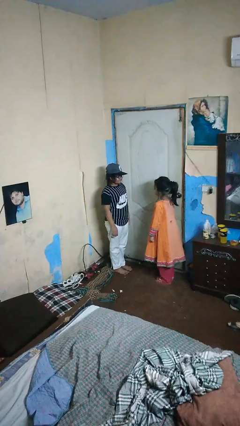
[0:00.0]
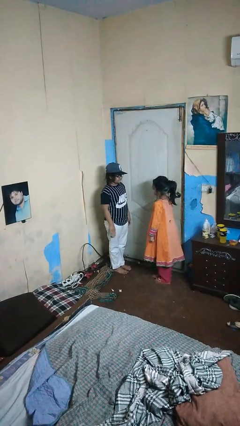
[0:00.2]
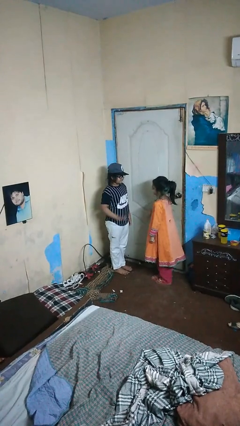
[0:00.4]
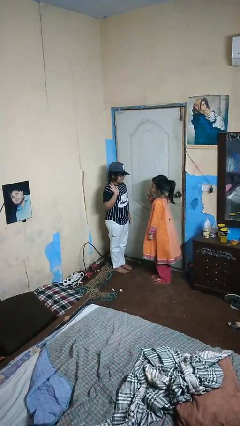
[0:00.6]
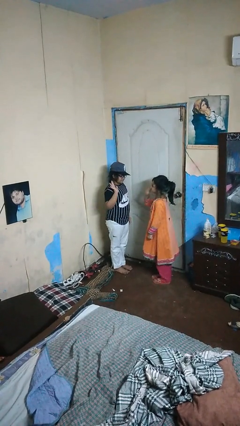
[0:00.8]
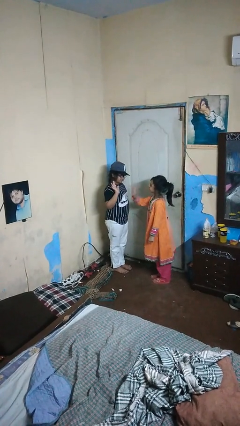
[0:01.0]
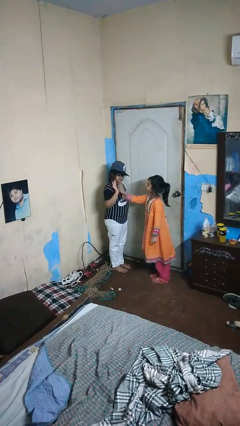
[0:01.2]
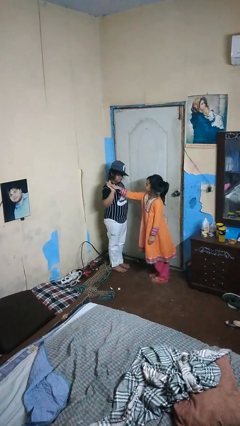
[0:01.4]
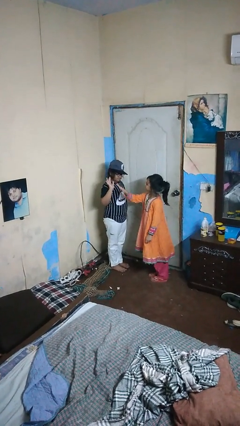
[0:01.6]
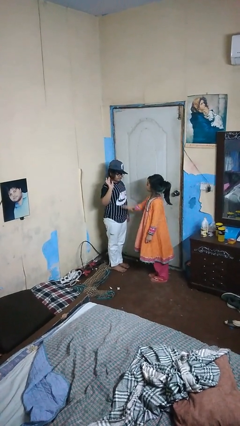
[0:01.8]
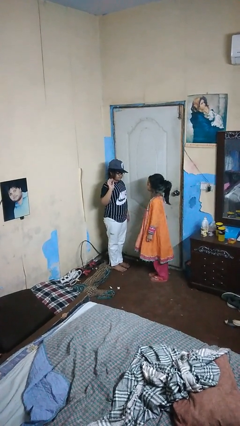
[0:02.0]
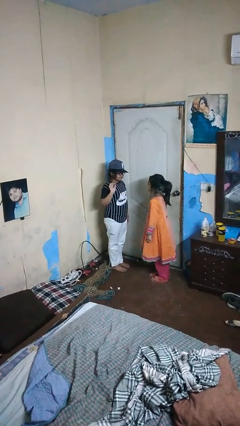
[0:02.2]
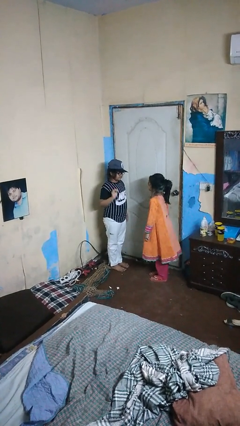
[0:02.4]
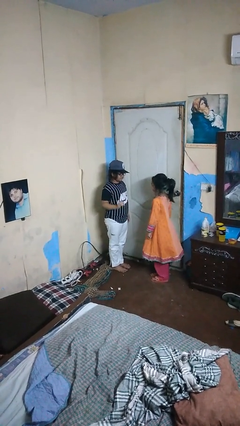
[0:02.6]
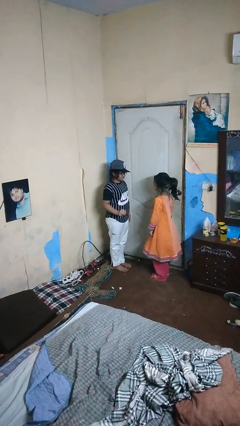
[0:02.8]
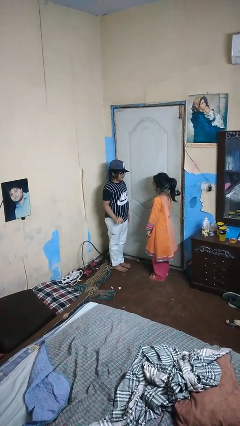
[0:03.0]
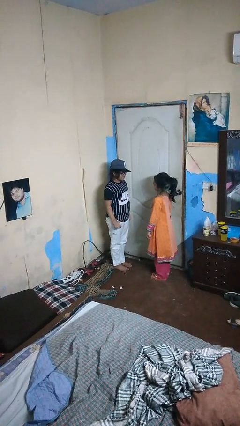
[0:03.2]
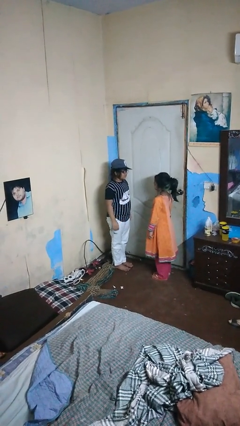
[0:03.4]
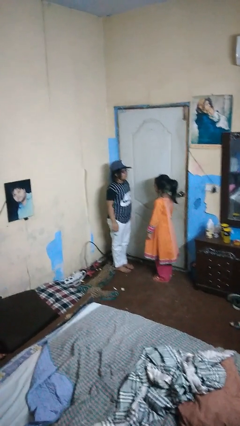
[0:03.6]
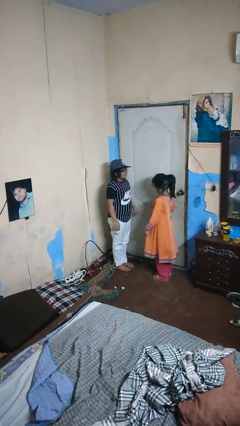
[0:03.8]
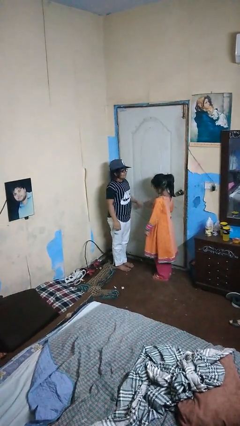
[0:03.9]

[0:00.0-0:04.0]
person highfives hand

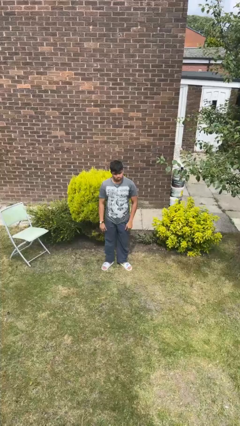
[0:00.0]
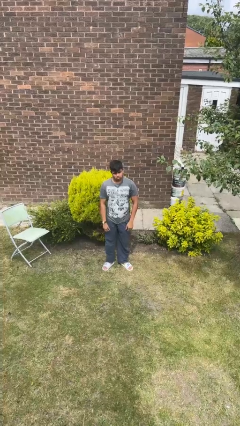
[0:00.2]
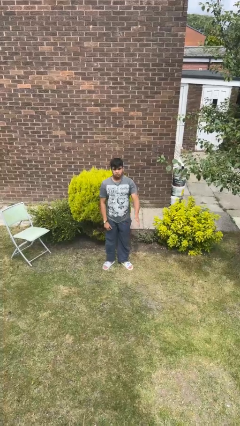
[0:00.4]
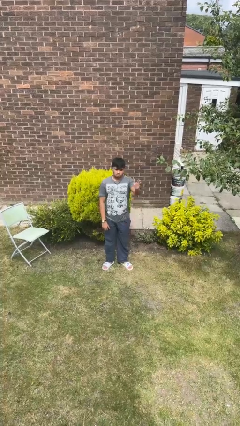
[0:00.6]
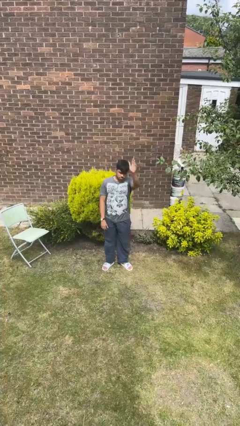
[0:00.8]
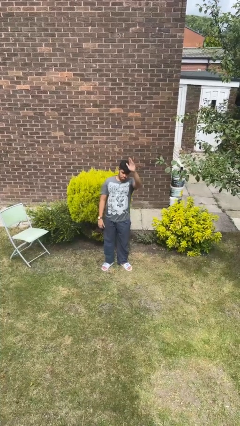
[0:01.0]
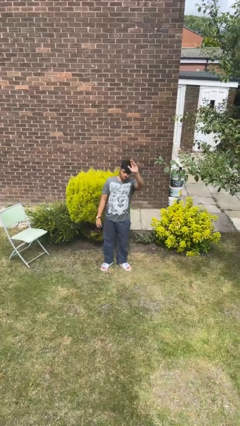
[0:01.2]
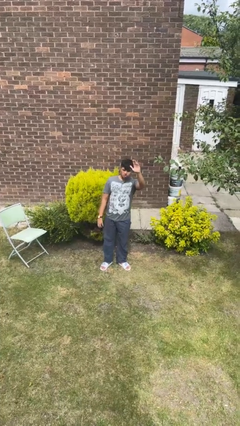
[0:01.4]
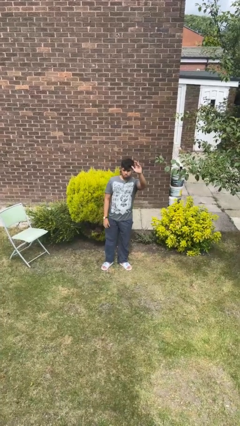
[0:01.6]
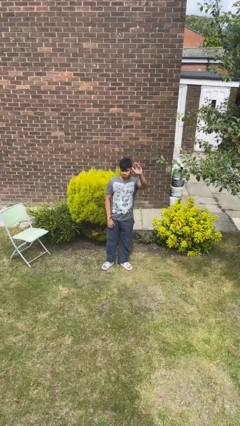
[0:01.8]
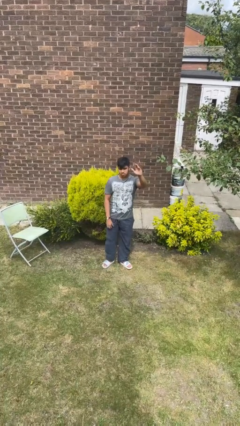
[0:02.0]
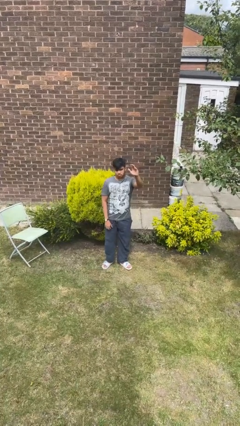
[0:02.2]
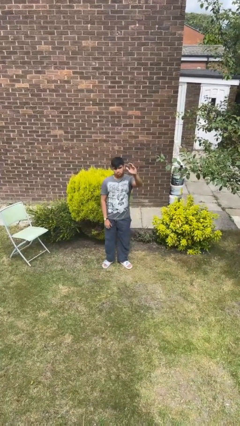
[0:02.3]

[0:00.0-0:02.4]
person gestures raise hand

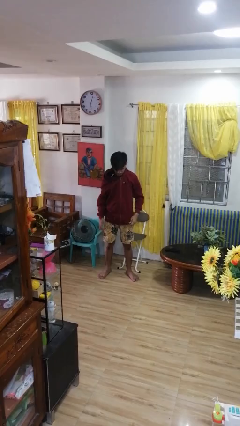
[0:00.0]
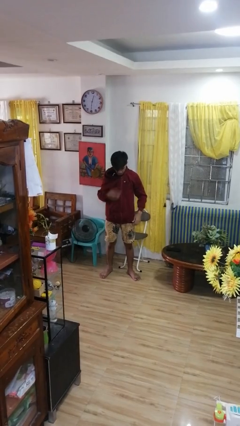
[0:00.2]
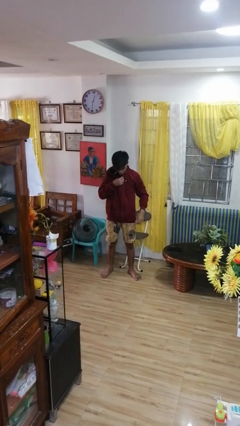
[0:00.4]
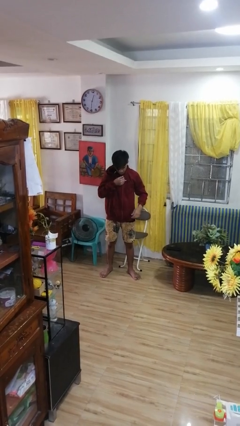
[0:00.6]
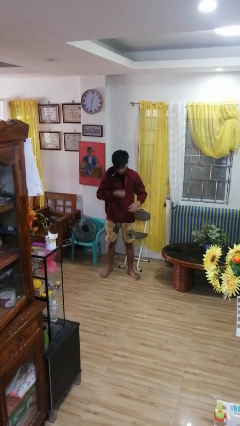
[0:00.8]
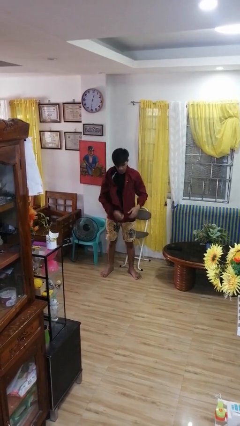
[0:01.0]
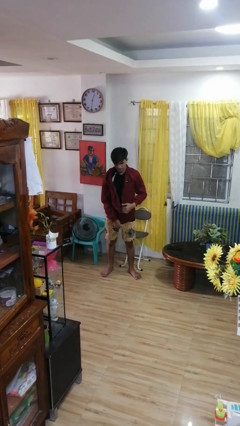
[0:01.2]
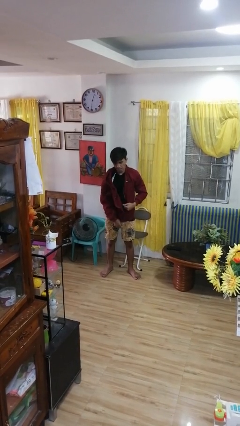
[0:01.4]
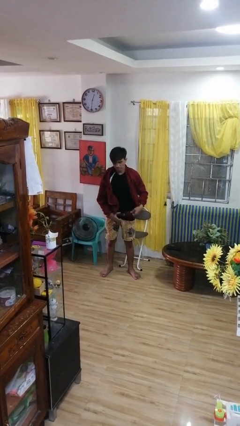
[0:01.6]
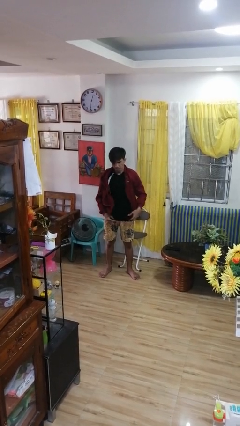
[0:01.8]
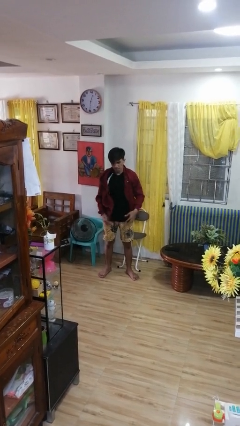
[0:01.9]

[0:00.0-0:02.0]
person unzips jacket

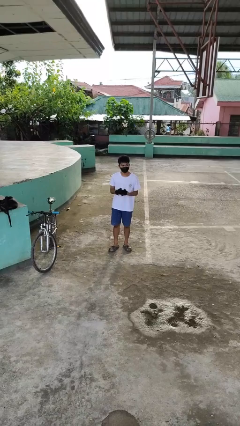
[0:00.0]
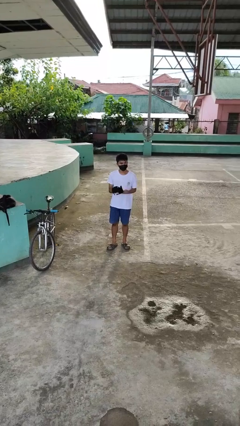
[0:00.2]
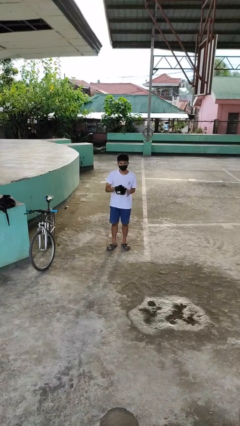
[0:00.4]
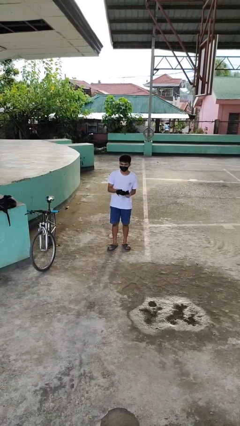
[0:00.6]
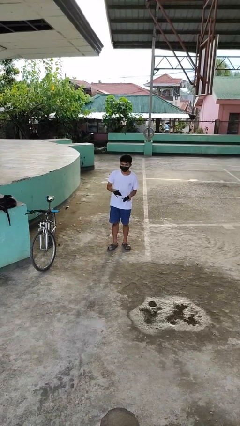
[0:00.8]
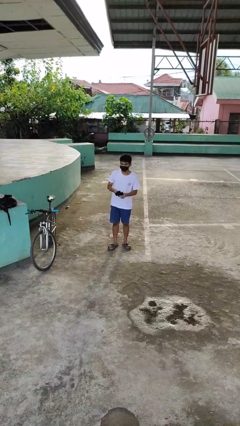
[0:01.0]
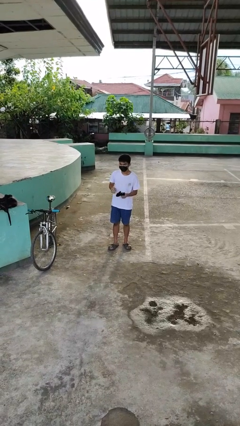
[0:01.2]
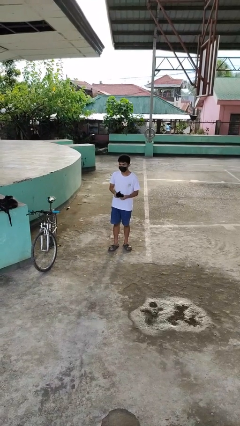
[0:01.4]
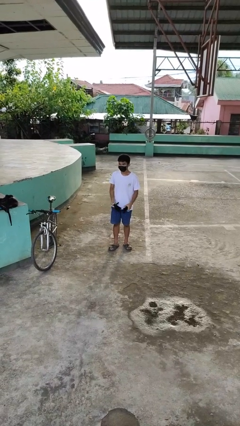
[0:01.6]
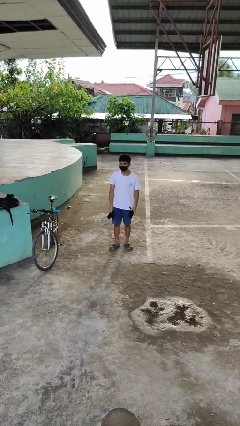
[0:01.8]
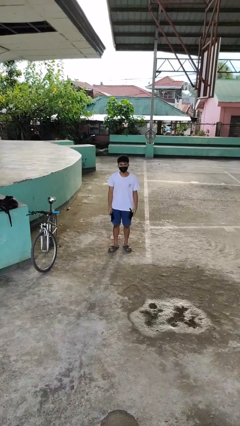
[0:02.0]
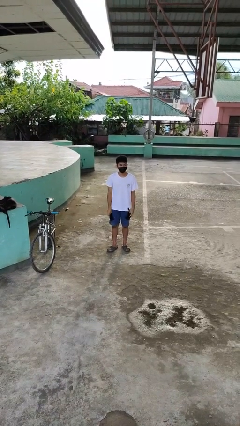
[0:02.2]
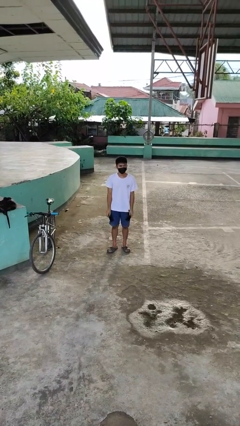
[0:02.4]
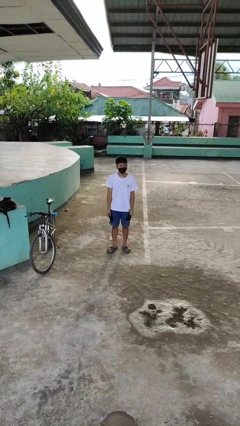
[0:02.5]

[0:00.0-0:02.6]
person takes off gloves

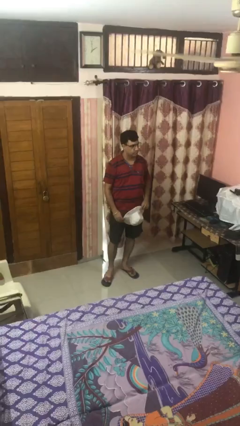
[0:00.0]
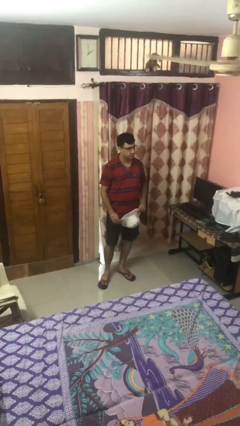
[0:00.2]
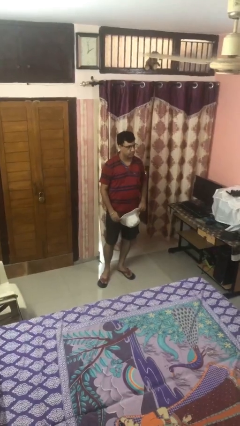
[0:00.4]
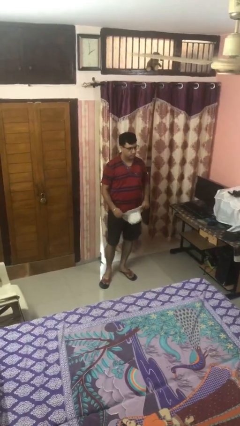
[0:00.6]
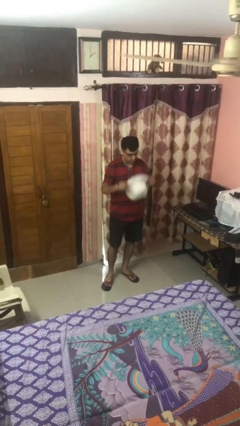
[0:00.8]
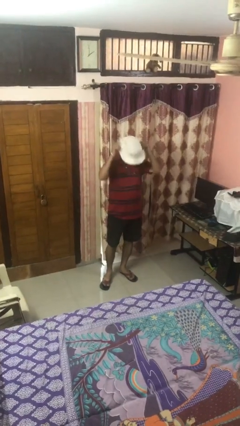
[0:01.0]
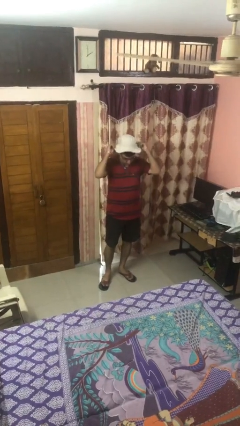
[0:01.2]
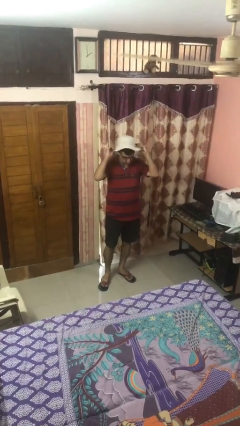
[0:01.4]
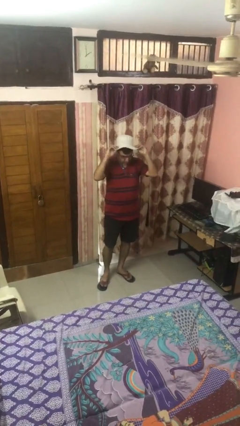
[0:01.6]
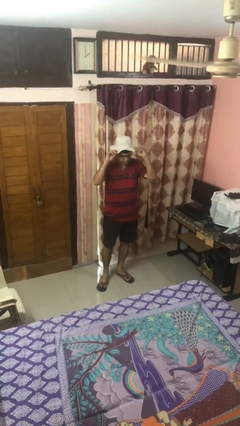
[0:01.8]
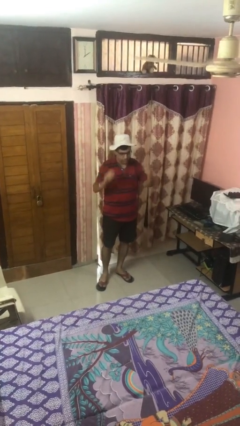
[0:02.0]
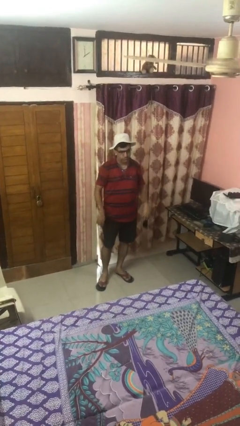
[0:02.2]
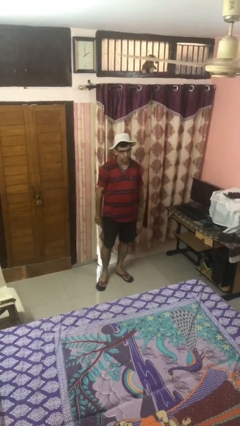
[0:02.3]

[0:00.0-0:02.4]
person puts on hat

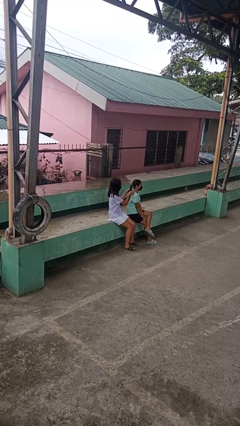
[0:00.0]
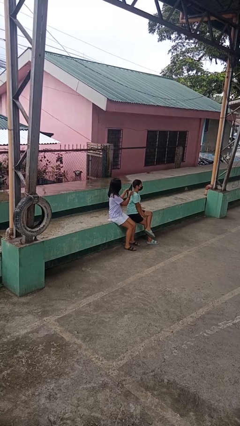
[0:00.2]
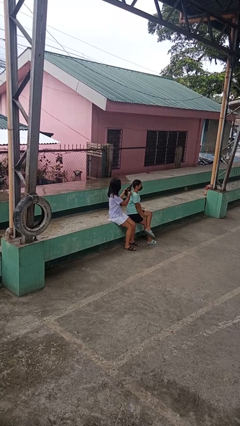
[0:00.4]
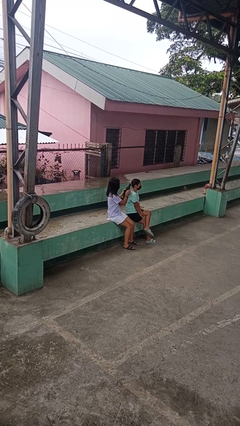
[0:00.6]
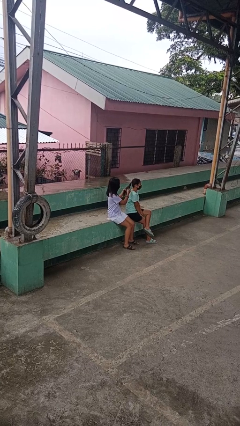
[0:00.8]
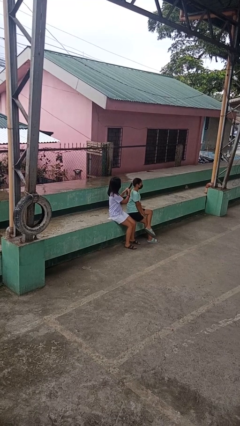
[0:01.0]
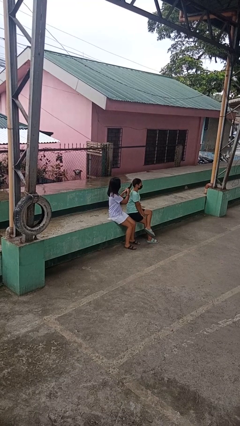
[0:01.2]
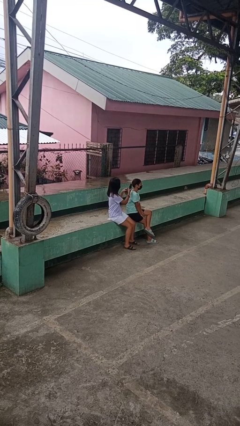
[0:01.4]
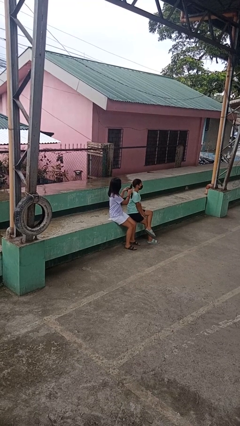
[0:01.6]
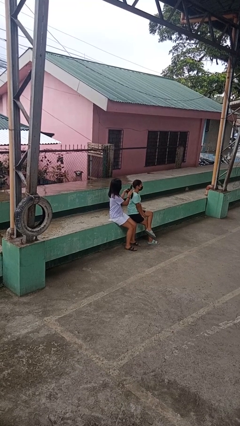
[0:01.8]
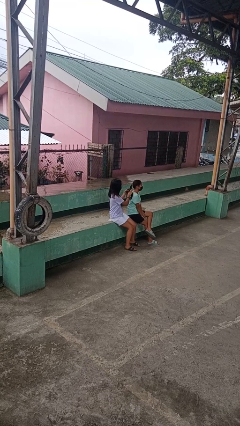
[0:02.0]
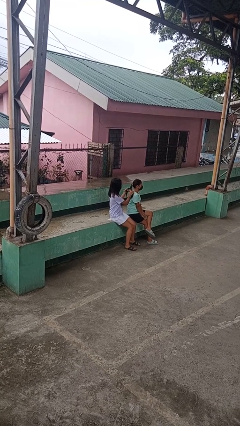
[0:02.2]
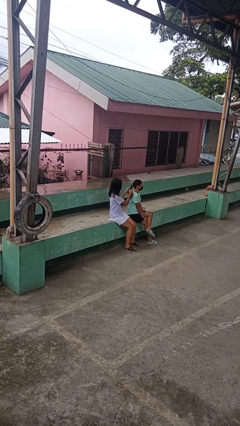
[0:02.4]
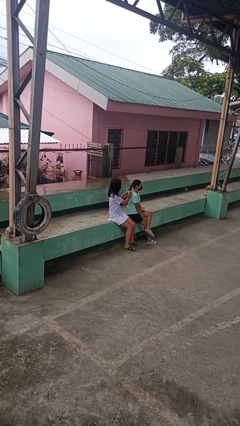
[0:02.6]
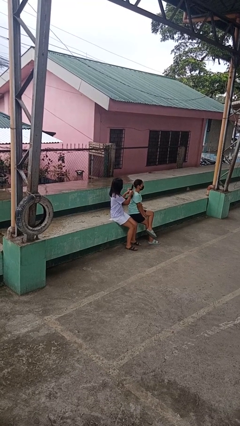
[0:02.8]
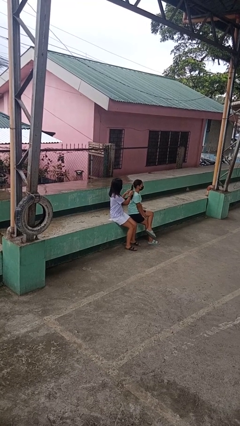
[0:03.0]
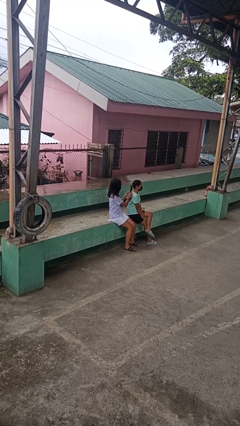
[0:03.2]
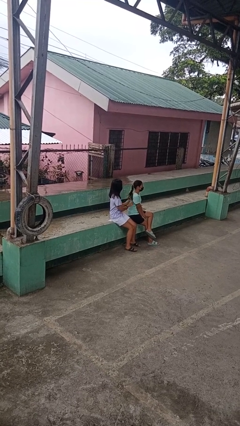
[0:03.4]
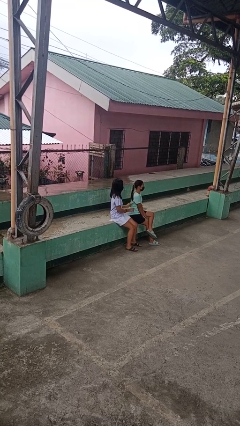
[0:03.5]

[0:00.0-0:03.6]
person braids hair of person

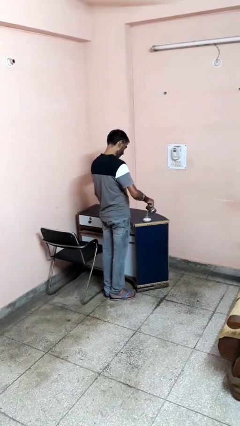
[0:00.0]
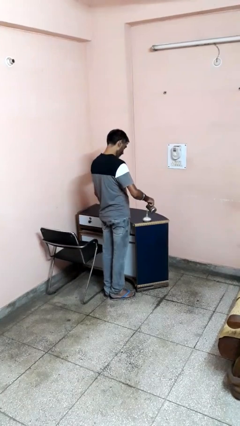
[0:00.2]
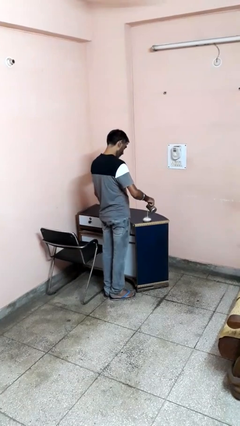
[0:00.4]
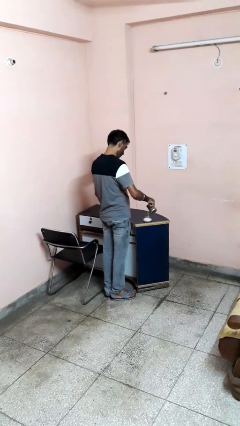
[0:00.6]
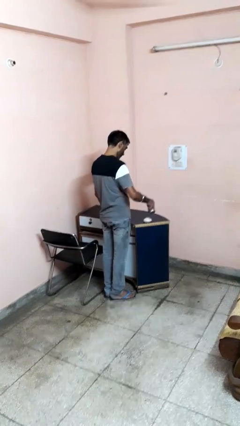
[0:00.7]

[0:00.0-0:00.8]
person pours into bowl
